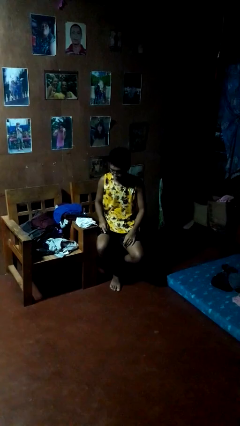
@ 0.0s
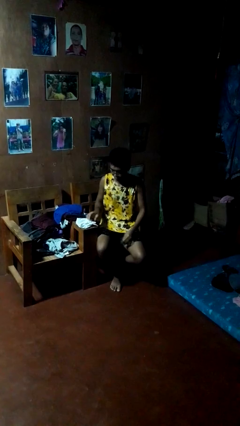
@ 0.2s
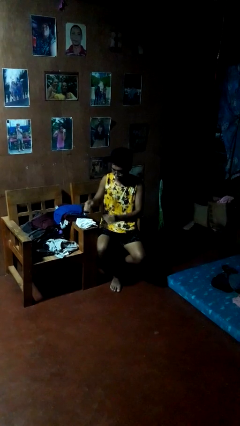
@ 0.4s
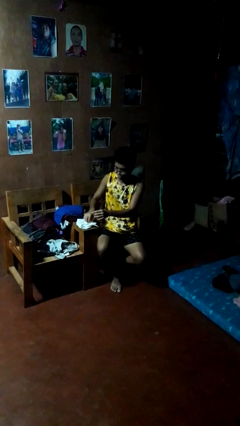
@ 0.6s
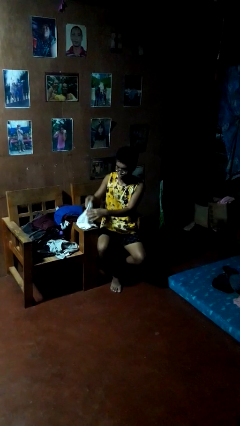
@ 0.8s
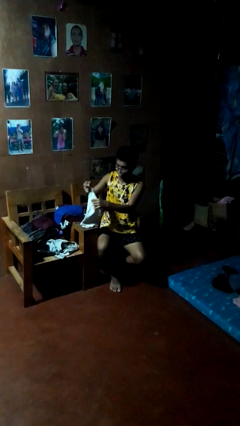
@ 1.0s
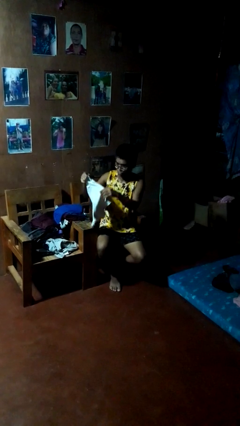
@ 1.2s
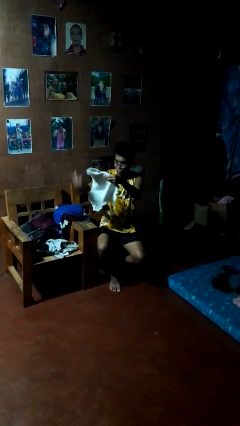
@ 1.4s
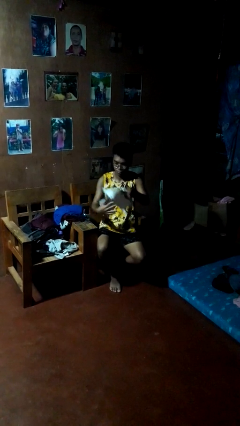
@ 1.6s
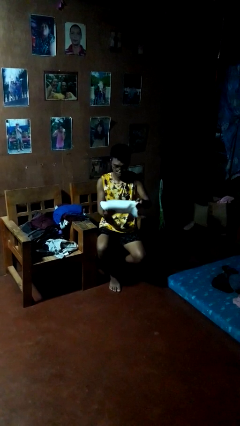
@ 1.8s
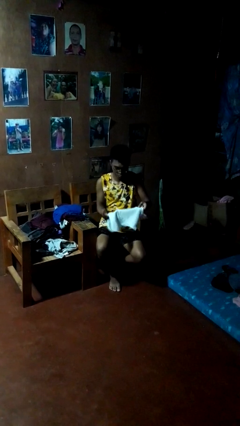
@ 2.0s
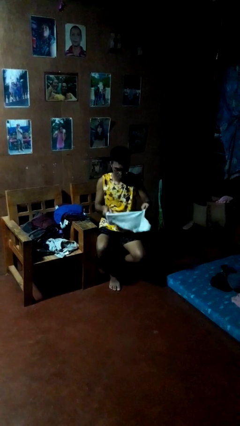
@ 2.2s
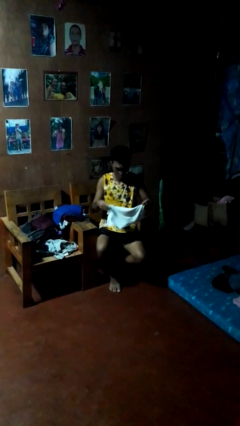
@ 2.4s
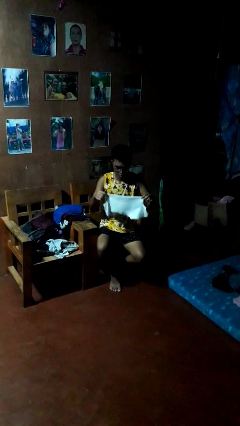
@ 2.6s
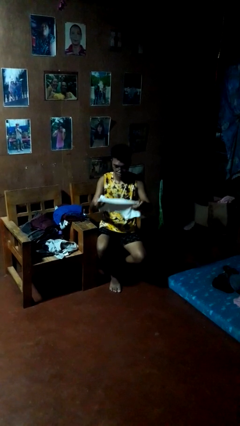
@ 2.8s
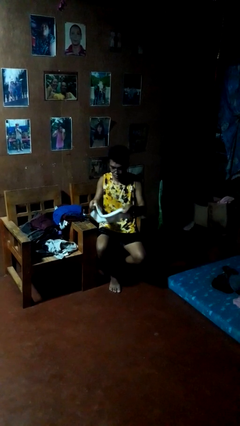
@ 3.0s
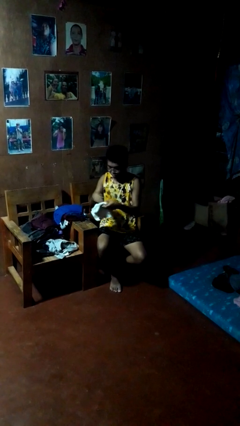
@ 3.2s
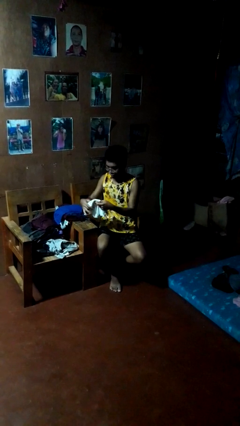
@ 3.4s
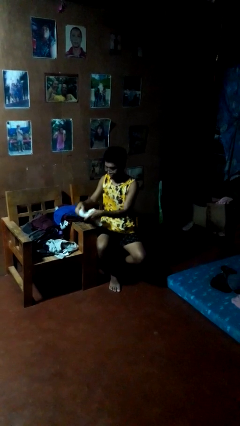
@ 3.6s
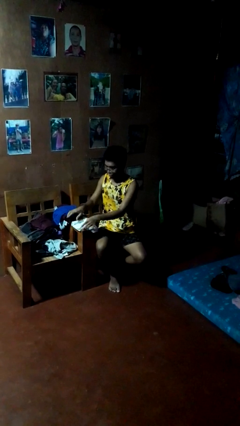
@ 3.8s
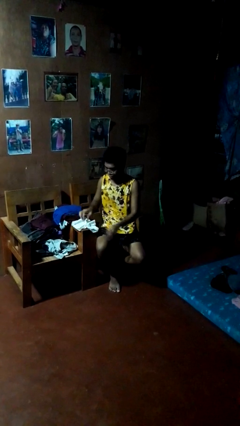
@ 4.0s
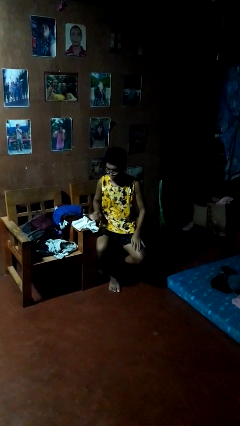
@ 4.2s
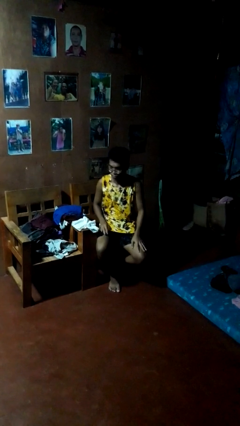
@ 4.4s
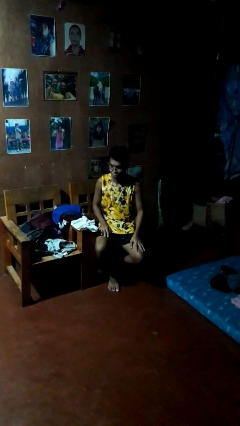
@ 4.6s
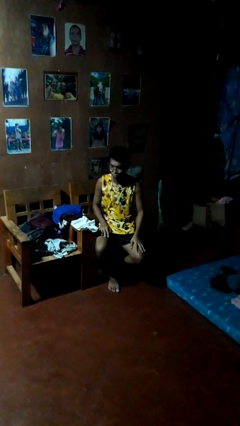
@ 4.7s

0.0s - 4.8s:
person folds shirt

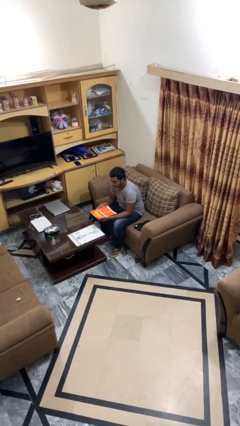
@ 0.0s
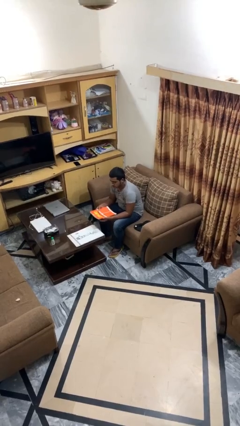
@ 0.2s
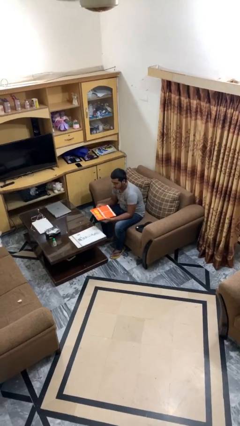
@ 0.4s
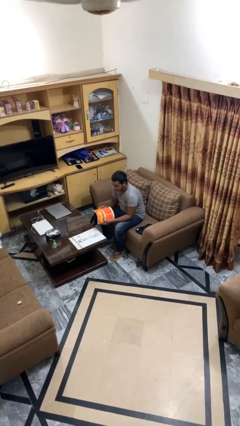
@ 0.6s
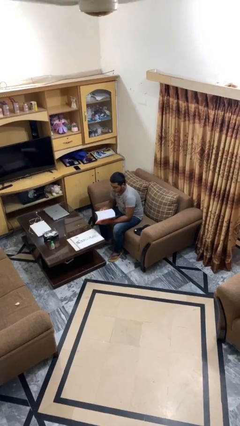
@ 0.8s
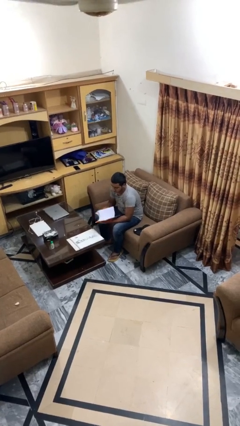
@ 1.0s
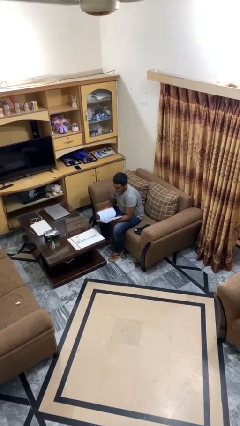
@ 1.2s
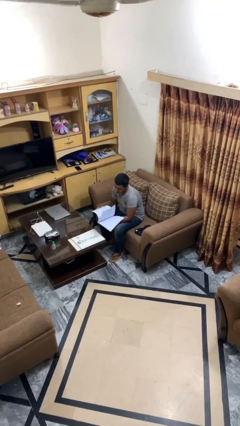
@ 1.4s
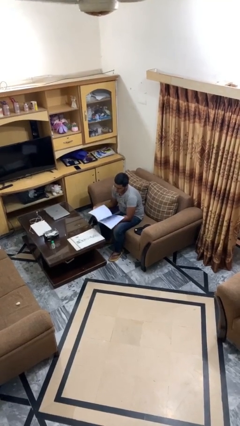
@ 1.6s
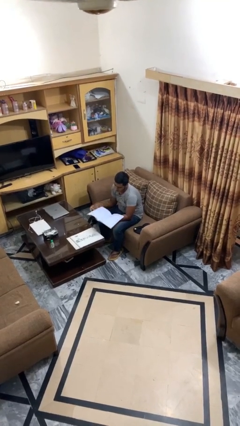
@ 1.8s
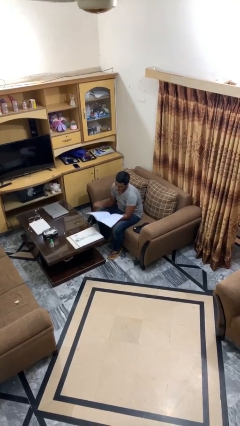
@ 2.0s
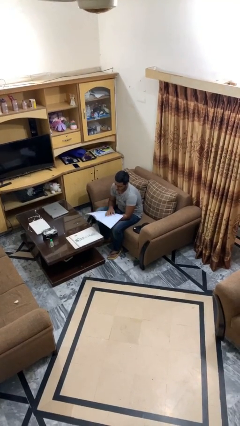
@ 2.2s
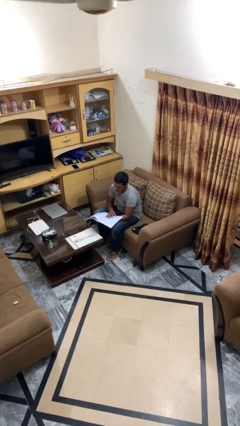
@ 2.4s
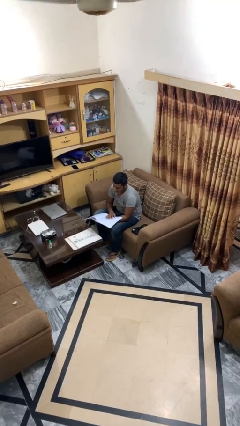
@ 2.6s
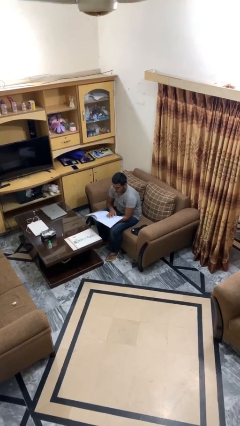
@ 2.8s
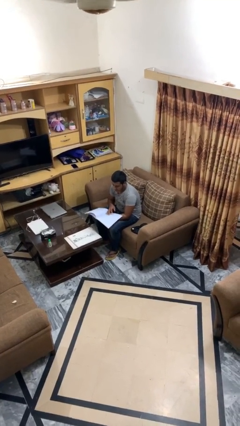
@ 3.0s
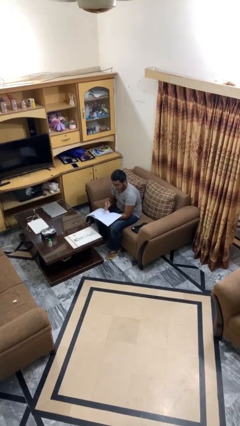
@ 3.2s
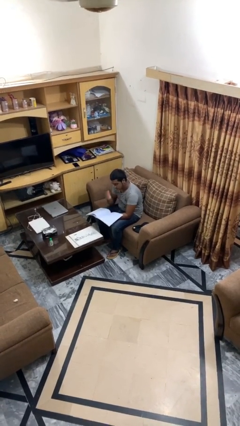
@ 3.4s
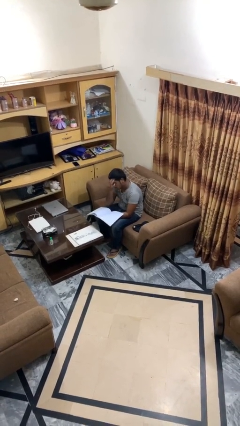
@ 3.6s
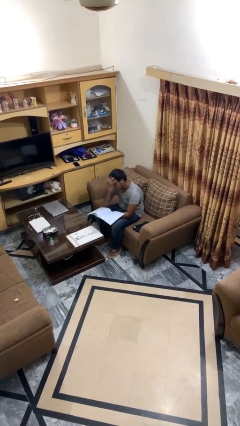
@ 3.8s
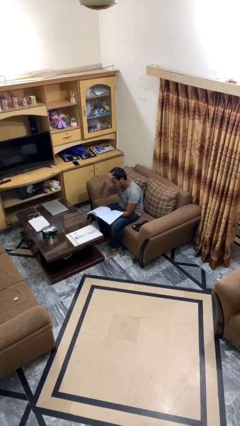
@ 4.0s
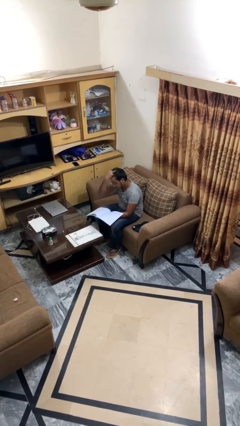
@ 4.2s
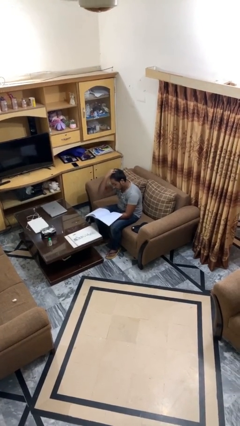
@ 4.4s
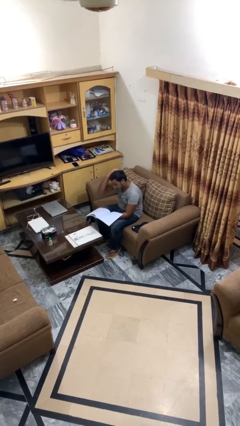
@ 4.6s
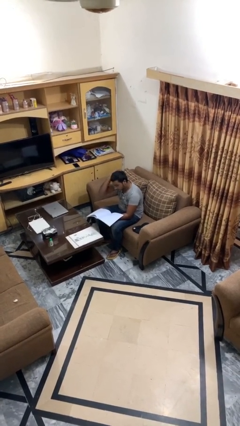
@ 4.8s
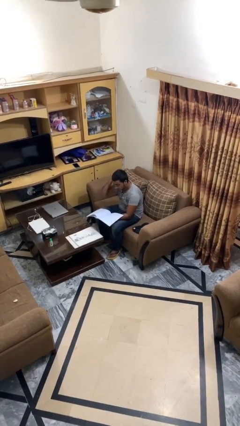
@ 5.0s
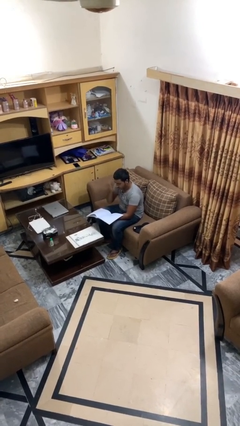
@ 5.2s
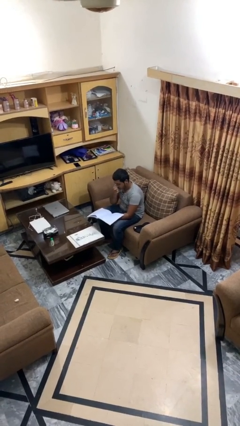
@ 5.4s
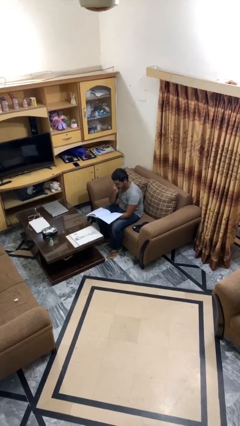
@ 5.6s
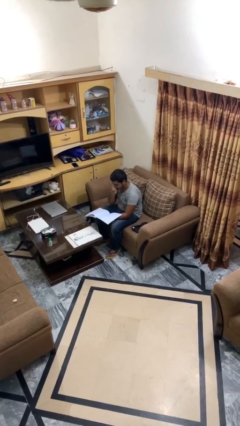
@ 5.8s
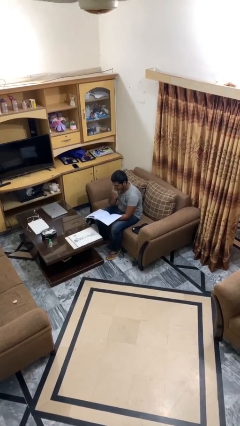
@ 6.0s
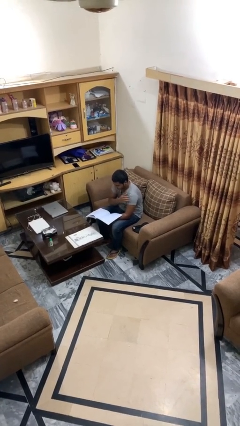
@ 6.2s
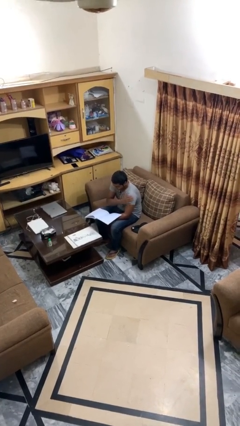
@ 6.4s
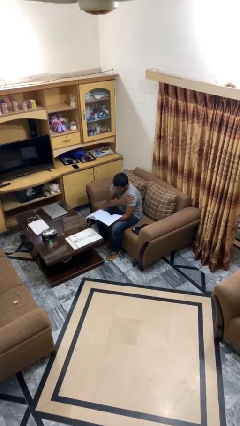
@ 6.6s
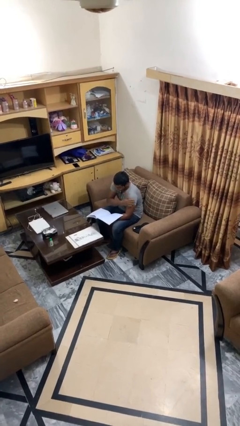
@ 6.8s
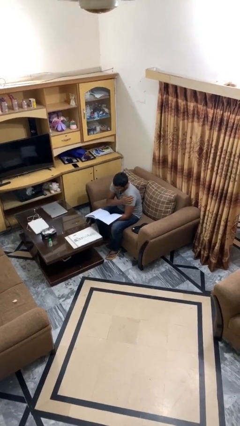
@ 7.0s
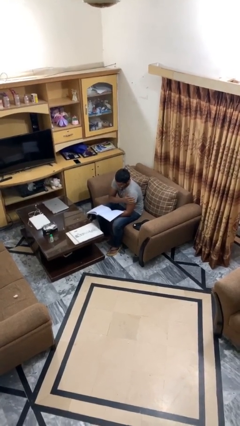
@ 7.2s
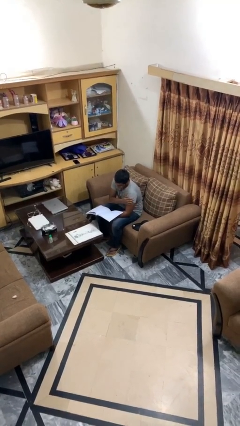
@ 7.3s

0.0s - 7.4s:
person reads document

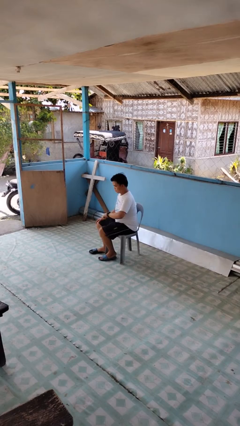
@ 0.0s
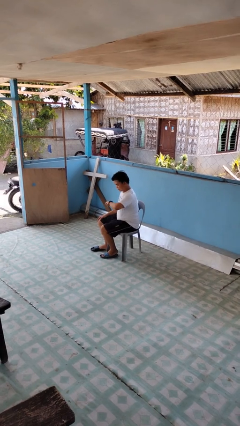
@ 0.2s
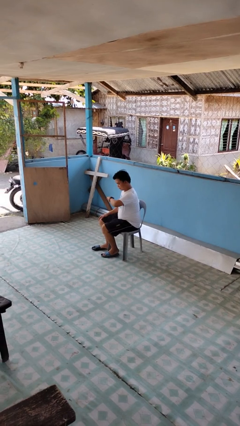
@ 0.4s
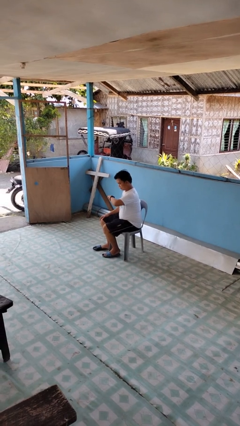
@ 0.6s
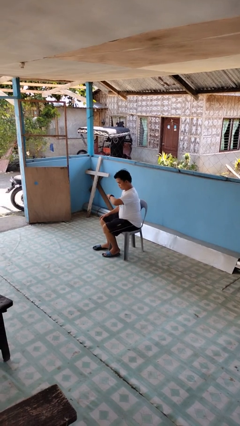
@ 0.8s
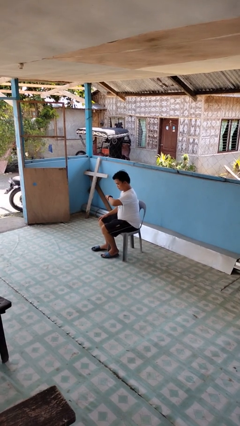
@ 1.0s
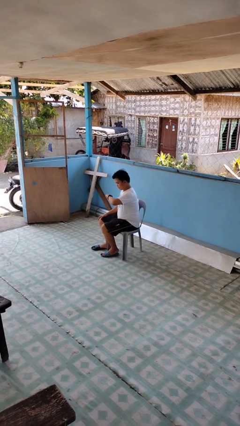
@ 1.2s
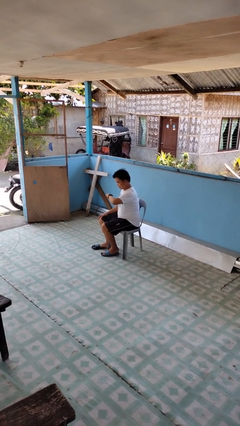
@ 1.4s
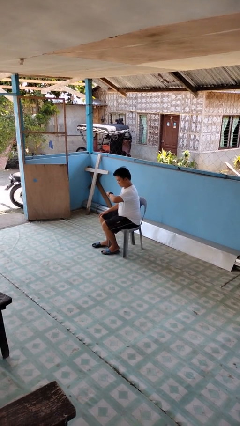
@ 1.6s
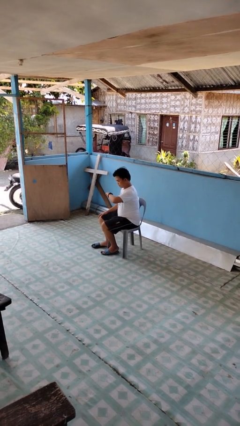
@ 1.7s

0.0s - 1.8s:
person looks at wristwatch

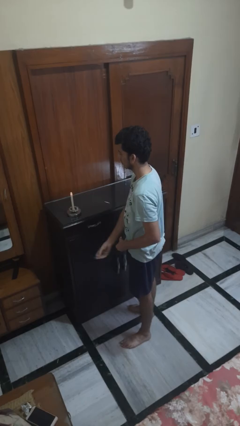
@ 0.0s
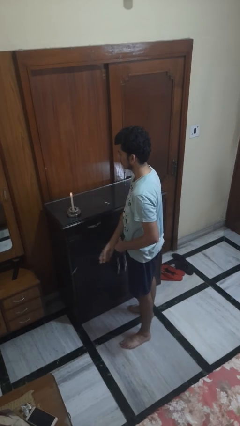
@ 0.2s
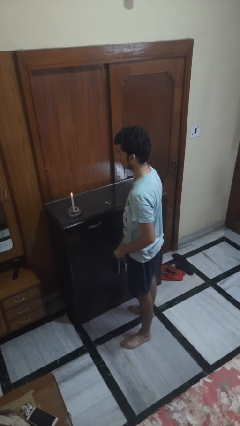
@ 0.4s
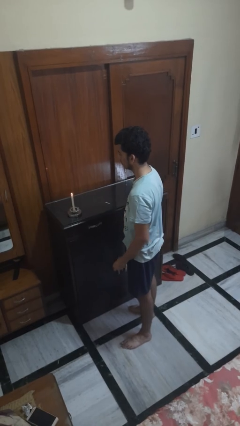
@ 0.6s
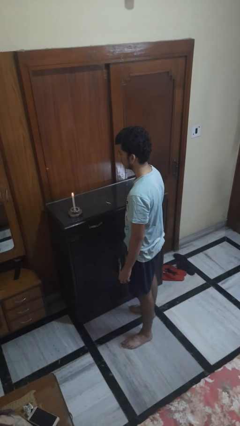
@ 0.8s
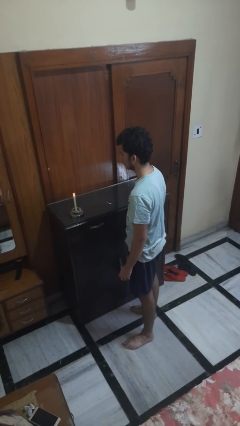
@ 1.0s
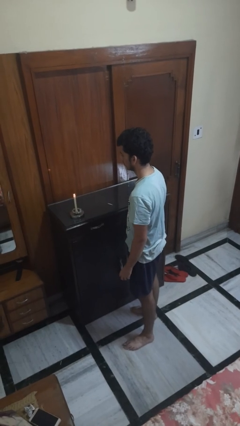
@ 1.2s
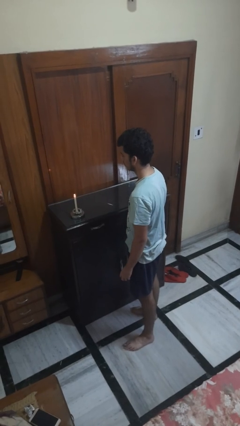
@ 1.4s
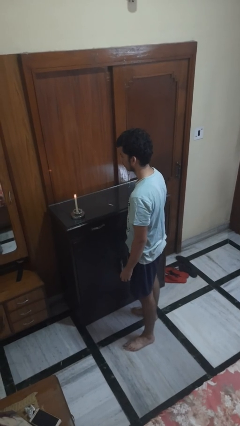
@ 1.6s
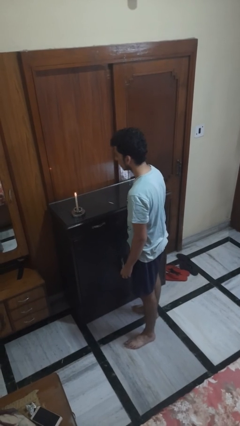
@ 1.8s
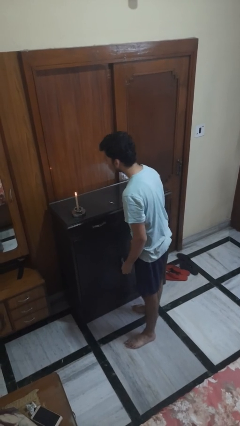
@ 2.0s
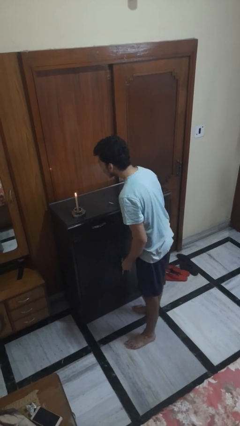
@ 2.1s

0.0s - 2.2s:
person extinguishes candle

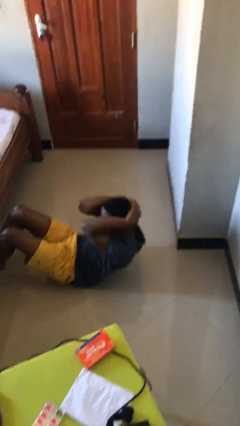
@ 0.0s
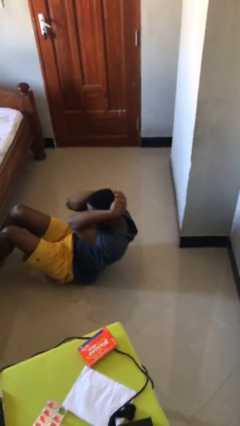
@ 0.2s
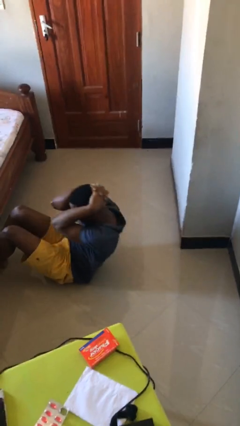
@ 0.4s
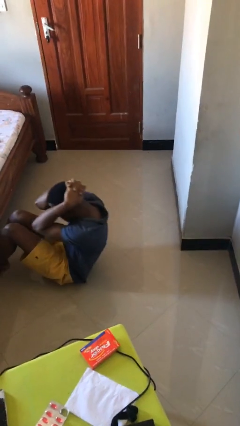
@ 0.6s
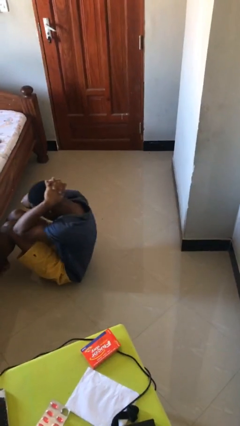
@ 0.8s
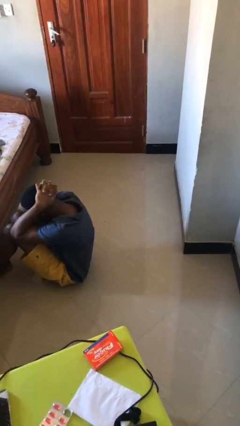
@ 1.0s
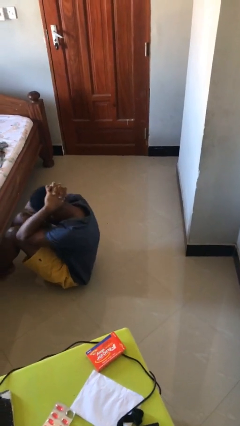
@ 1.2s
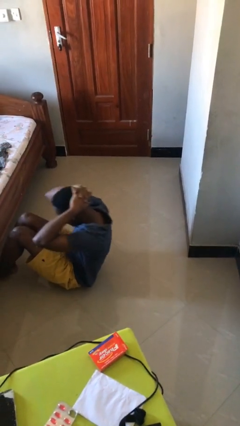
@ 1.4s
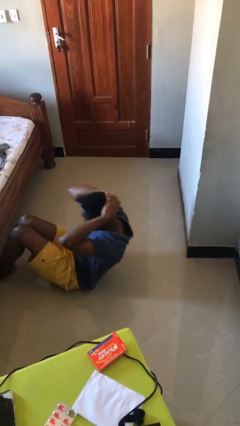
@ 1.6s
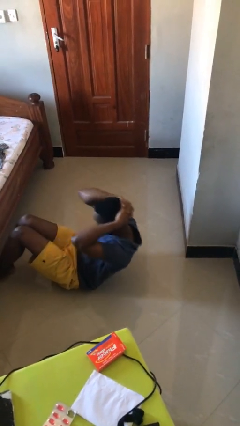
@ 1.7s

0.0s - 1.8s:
person exercises with situp
